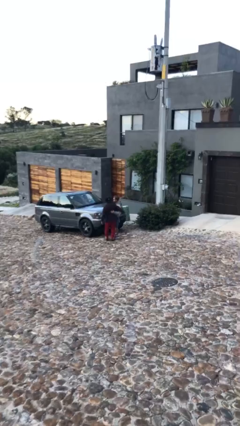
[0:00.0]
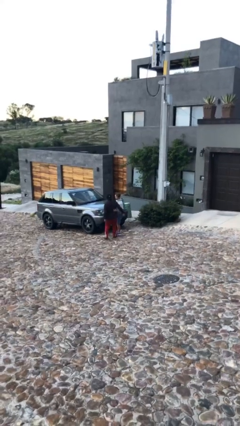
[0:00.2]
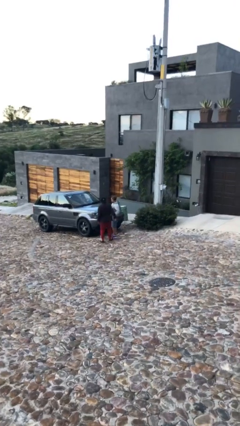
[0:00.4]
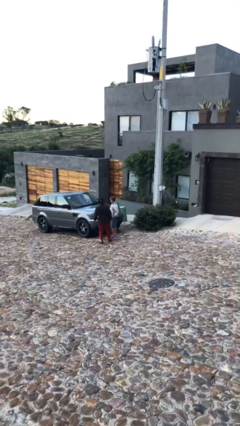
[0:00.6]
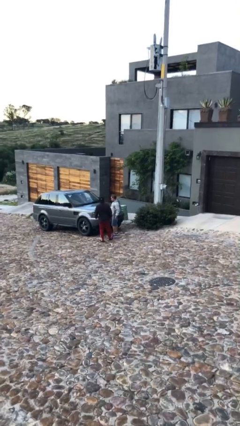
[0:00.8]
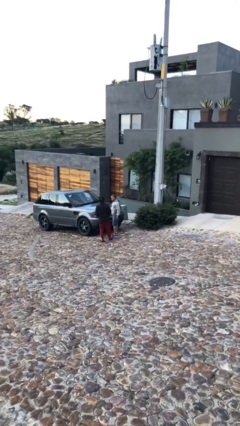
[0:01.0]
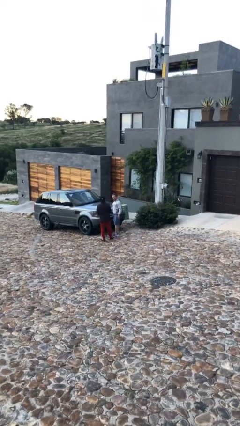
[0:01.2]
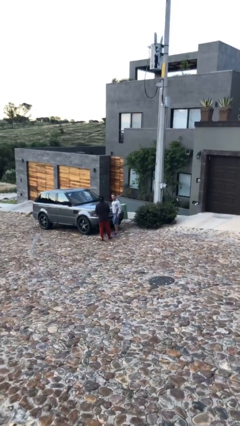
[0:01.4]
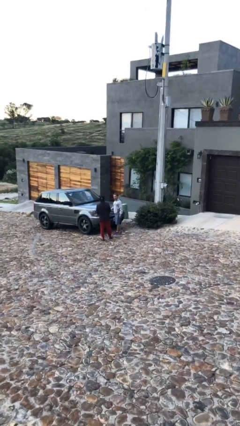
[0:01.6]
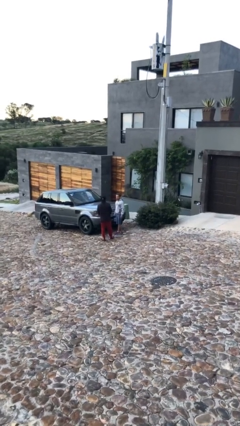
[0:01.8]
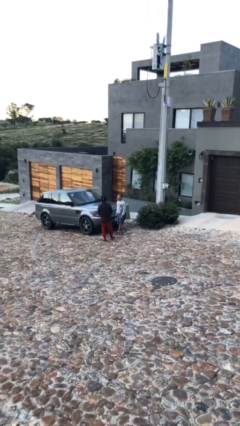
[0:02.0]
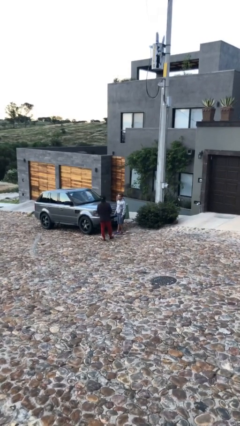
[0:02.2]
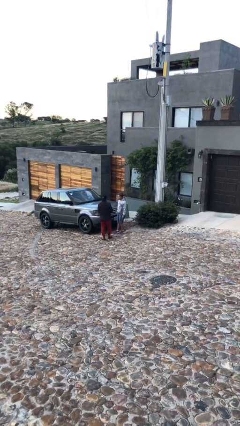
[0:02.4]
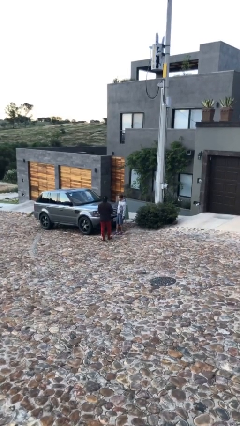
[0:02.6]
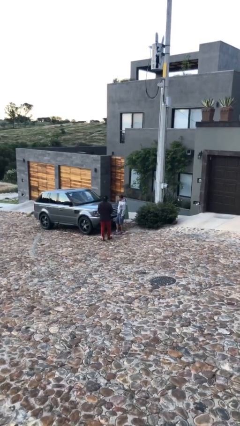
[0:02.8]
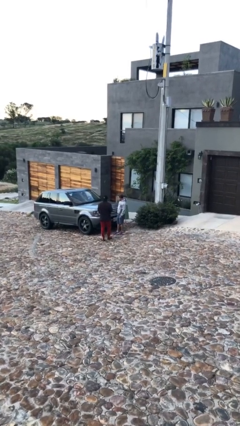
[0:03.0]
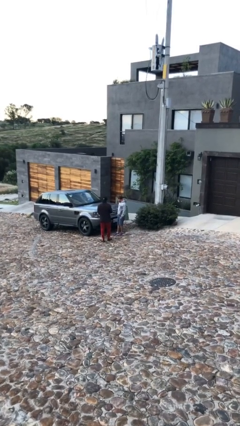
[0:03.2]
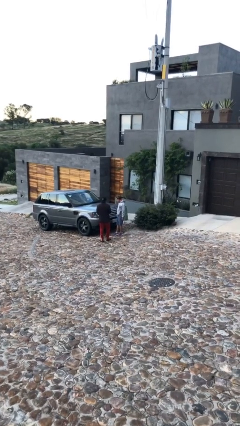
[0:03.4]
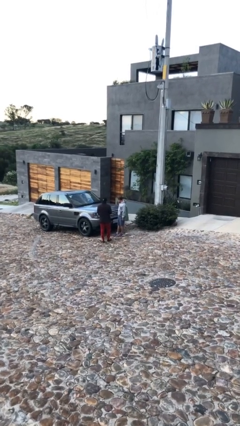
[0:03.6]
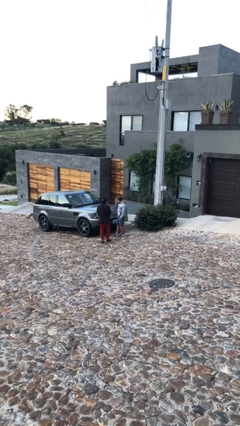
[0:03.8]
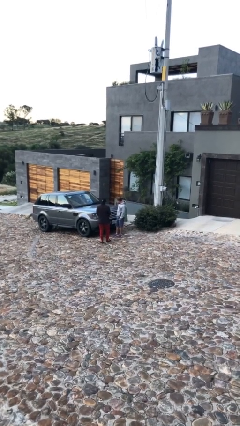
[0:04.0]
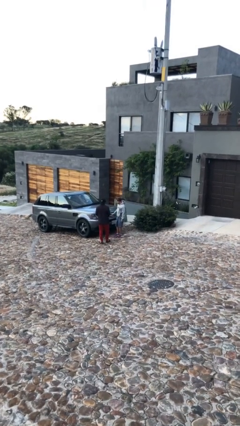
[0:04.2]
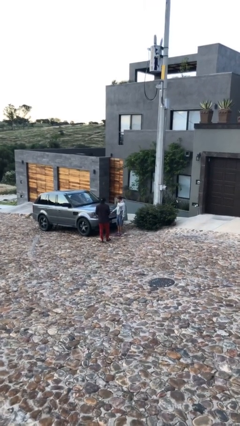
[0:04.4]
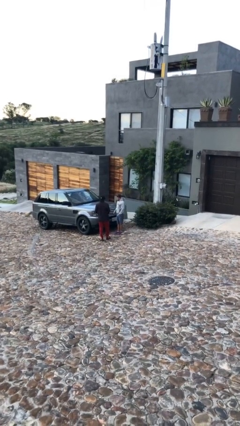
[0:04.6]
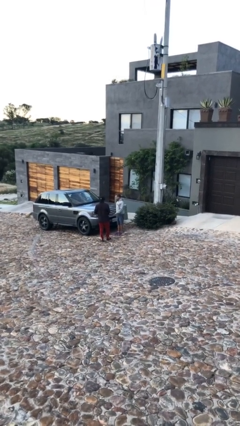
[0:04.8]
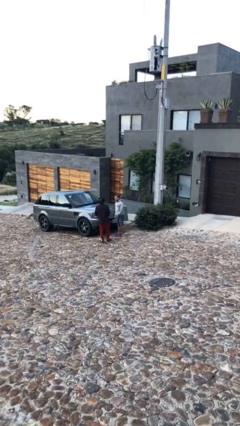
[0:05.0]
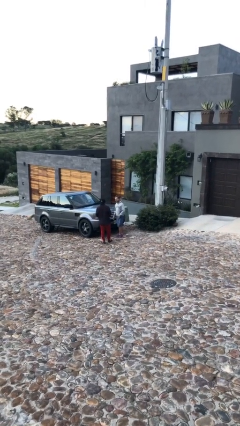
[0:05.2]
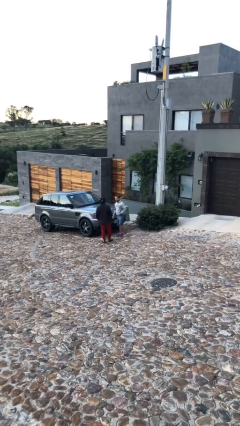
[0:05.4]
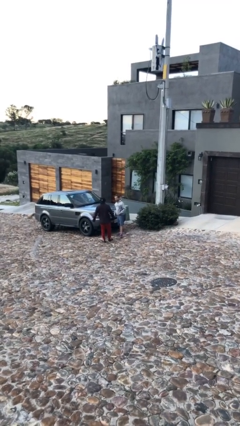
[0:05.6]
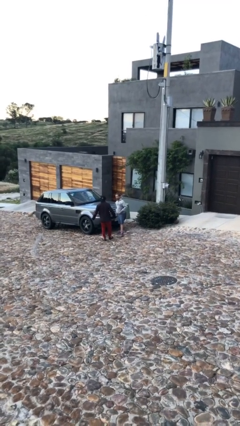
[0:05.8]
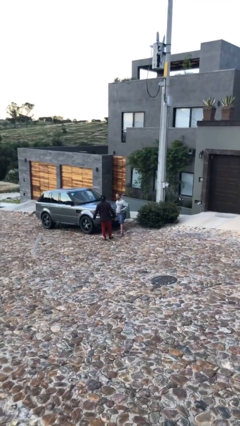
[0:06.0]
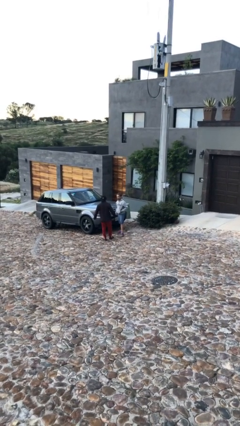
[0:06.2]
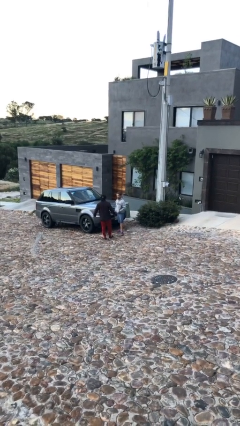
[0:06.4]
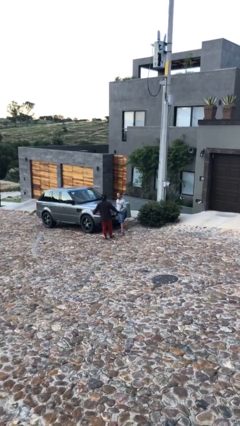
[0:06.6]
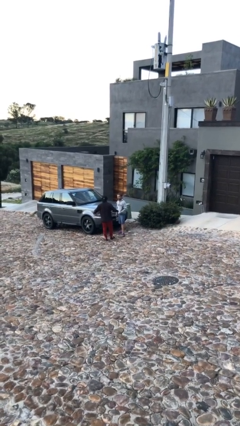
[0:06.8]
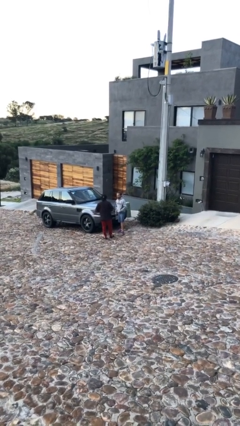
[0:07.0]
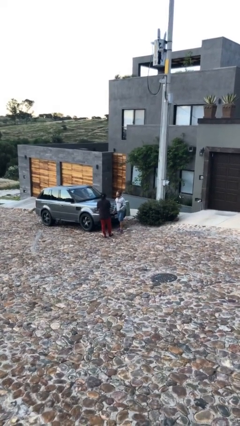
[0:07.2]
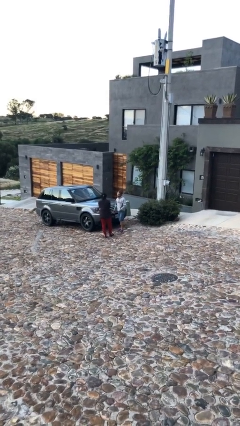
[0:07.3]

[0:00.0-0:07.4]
person talks to person

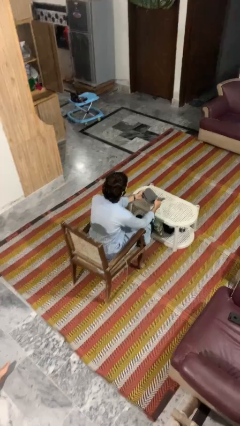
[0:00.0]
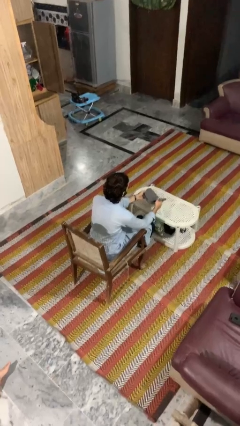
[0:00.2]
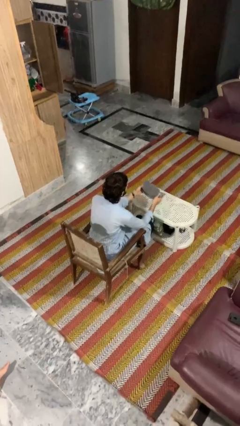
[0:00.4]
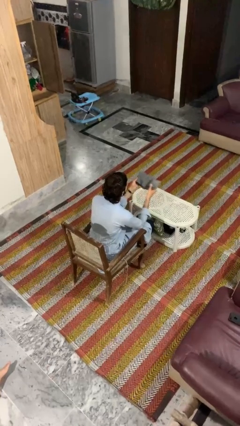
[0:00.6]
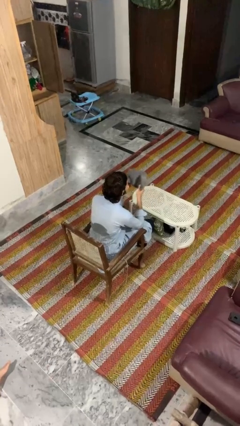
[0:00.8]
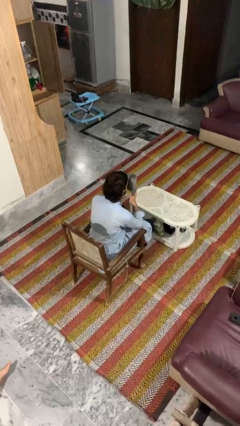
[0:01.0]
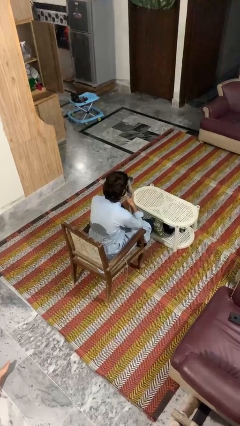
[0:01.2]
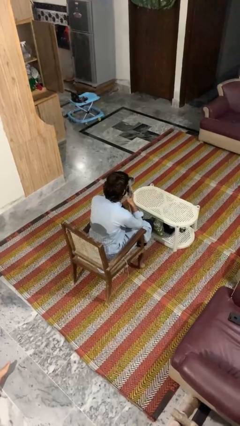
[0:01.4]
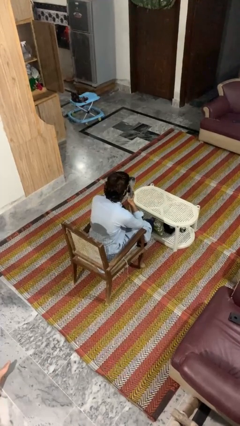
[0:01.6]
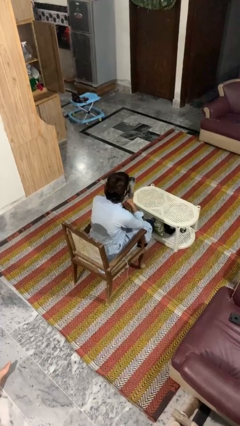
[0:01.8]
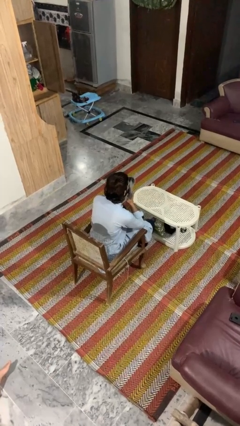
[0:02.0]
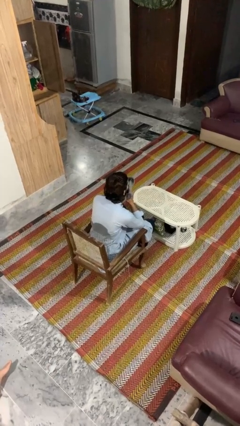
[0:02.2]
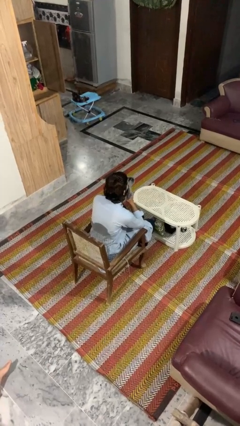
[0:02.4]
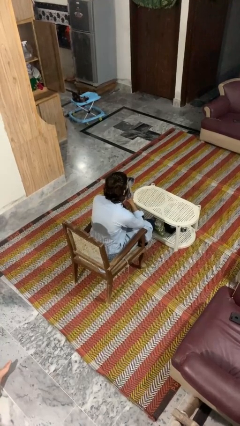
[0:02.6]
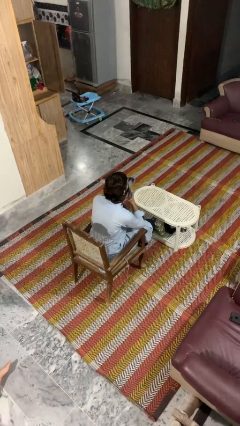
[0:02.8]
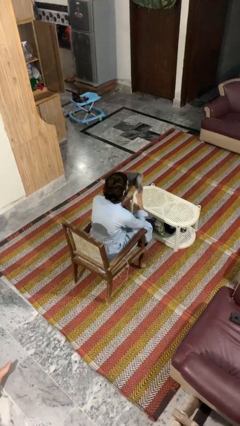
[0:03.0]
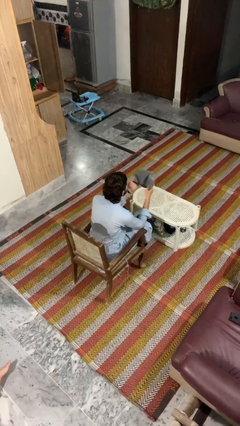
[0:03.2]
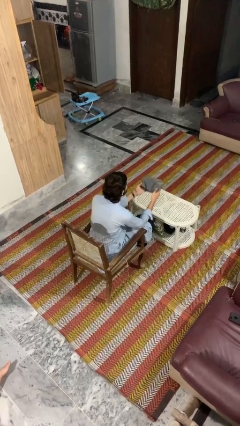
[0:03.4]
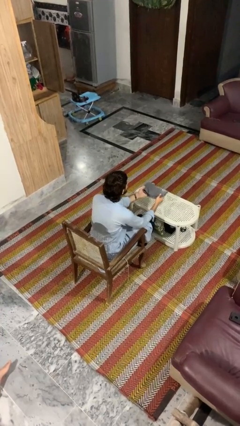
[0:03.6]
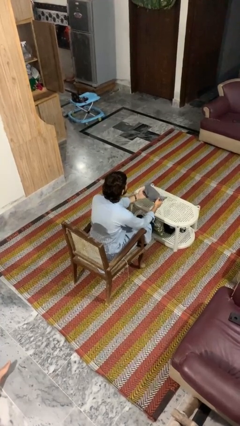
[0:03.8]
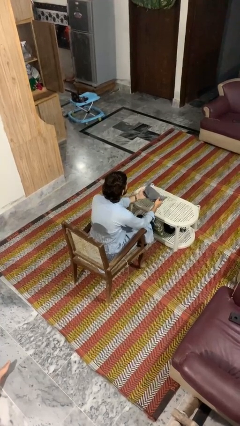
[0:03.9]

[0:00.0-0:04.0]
person wipes mouth with napkin

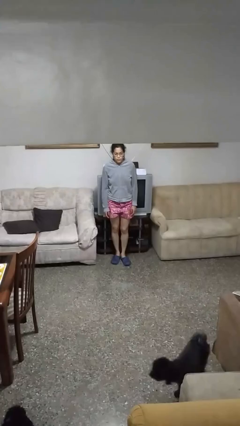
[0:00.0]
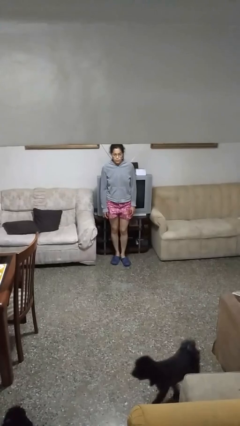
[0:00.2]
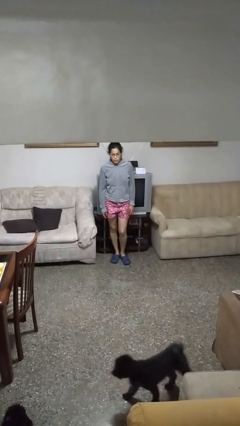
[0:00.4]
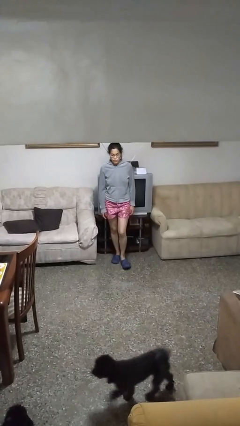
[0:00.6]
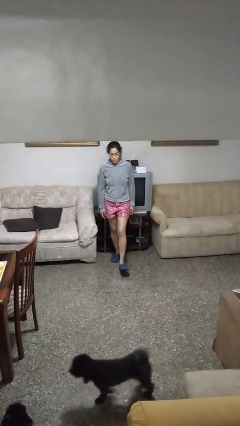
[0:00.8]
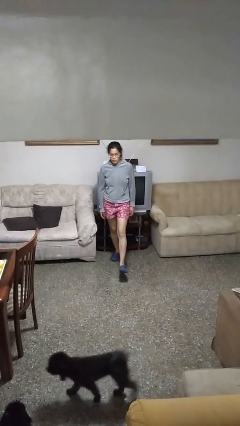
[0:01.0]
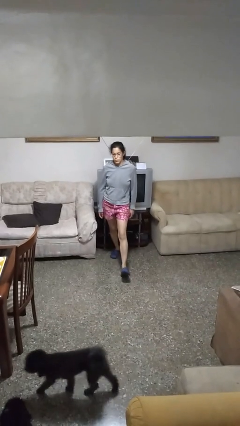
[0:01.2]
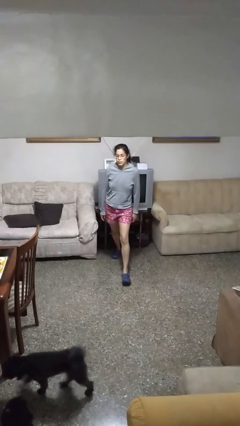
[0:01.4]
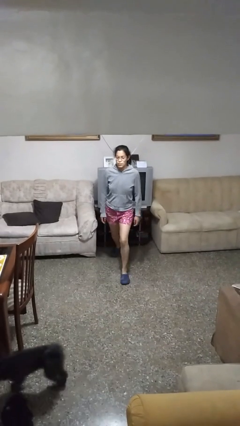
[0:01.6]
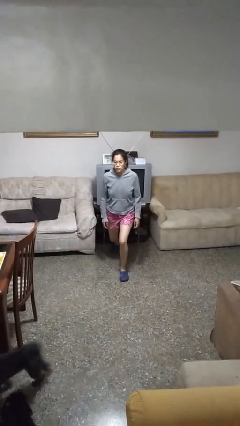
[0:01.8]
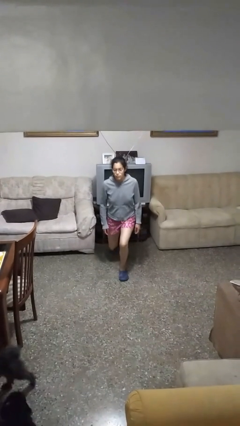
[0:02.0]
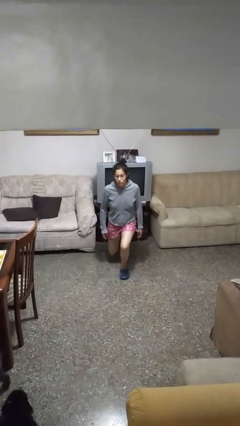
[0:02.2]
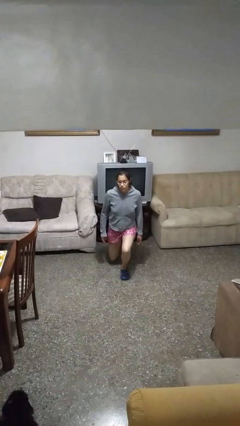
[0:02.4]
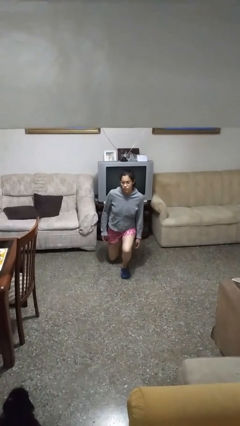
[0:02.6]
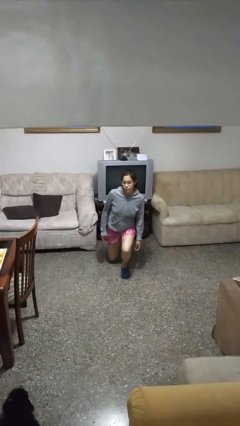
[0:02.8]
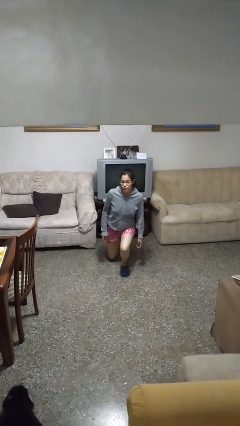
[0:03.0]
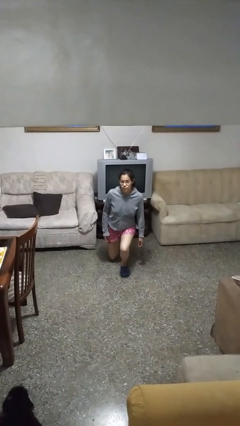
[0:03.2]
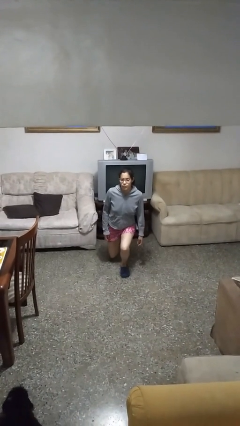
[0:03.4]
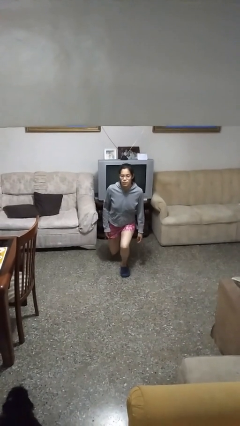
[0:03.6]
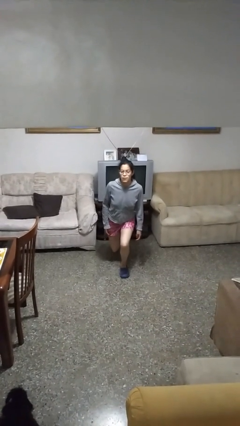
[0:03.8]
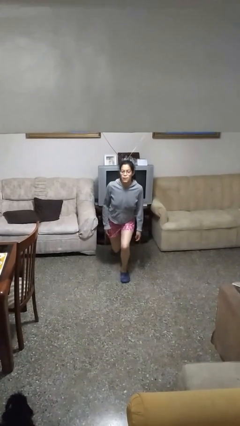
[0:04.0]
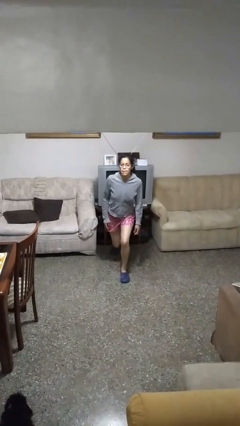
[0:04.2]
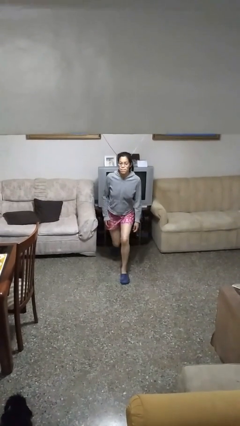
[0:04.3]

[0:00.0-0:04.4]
person exercises with lunges

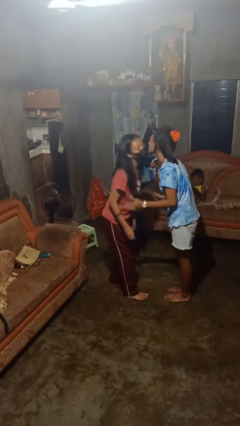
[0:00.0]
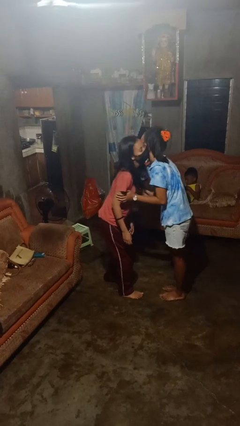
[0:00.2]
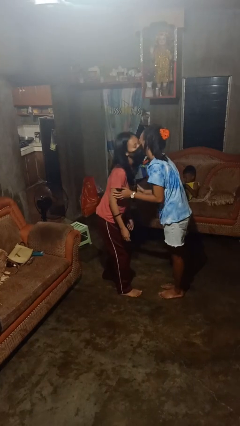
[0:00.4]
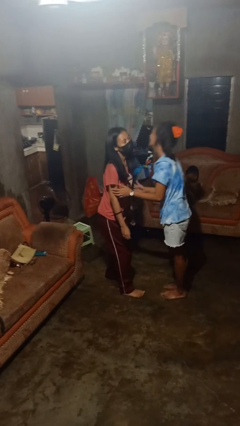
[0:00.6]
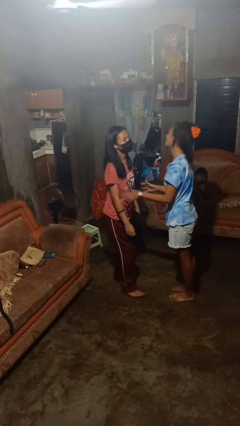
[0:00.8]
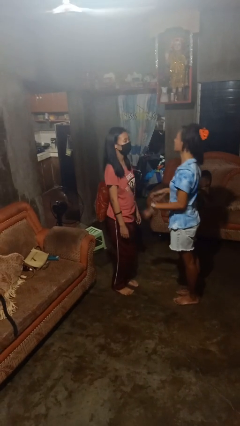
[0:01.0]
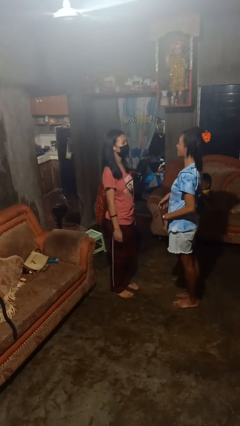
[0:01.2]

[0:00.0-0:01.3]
person kisses cheek of person

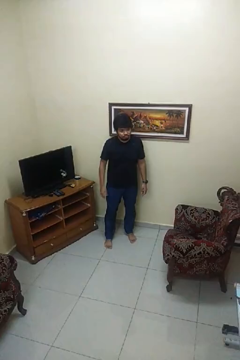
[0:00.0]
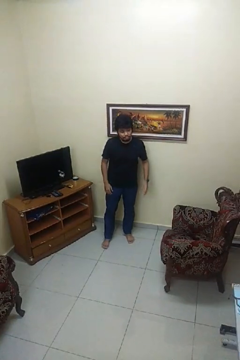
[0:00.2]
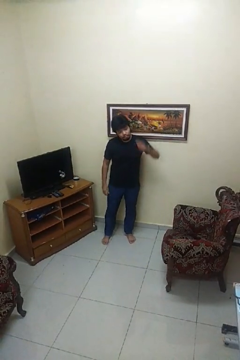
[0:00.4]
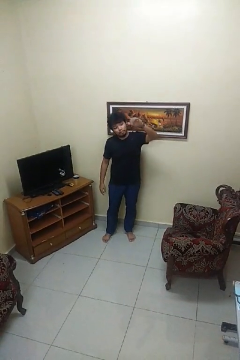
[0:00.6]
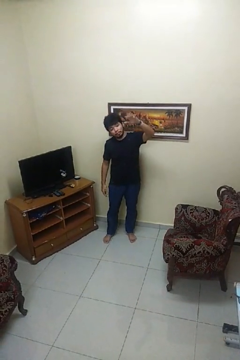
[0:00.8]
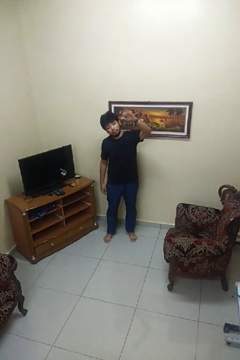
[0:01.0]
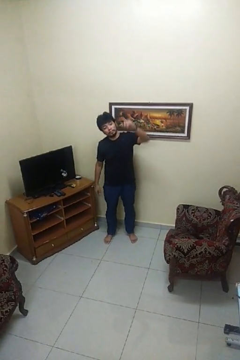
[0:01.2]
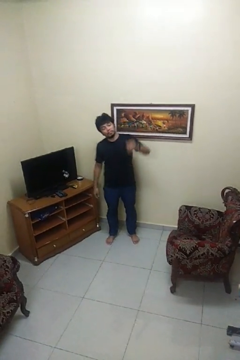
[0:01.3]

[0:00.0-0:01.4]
person gestures come here
